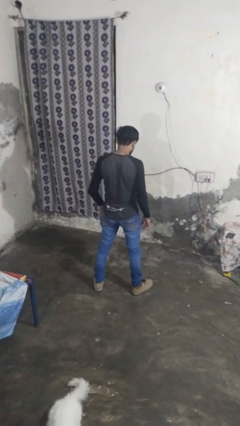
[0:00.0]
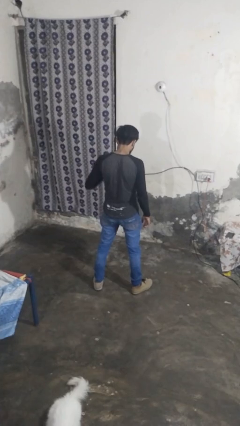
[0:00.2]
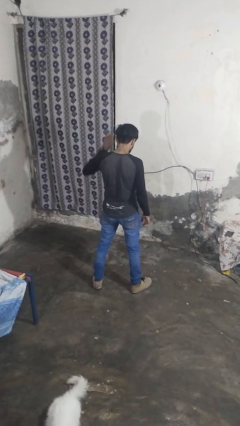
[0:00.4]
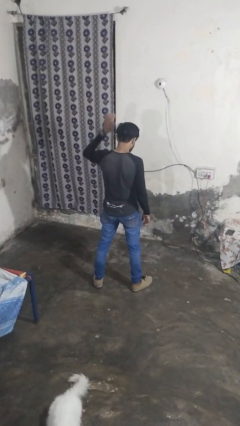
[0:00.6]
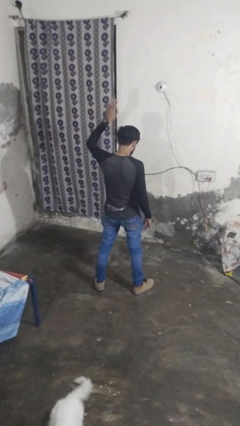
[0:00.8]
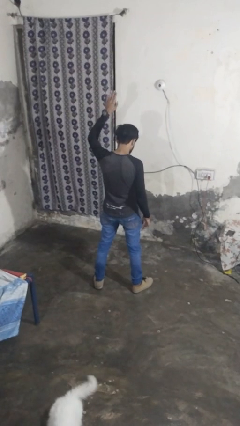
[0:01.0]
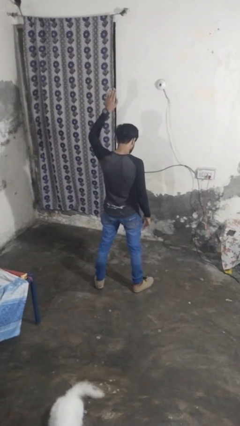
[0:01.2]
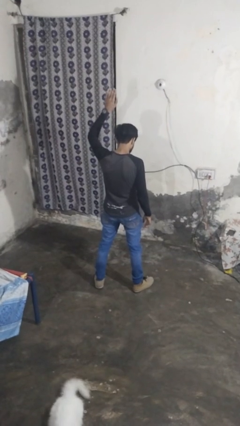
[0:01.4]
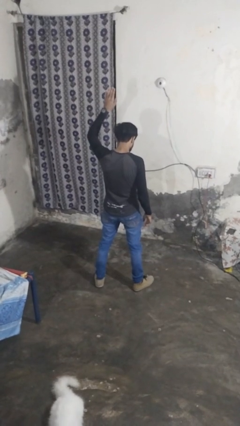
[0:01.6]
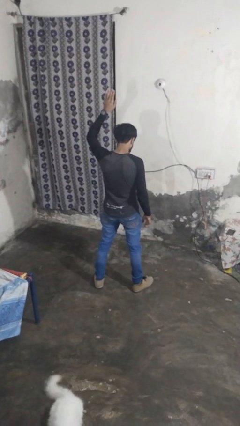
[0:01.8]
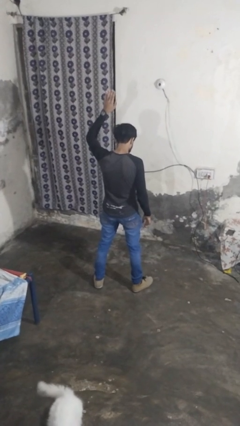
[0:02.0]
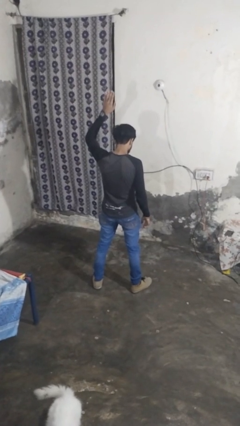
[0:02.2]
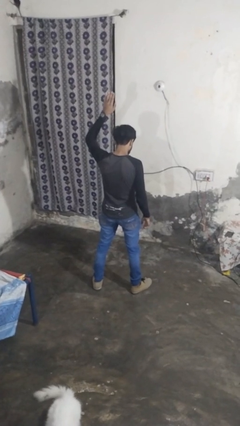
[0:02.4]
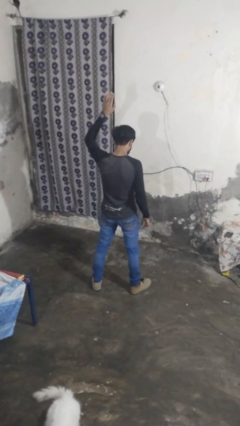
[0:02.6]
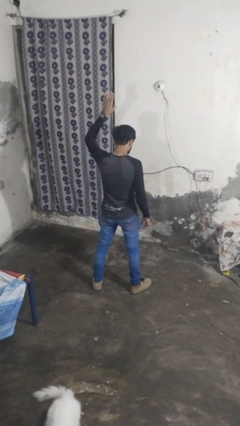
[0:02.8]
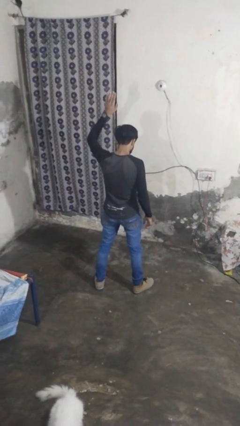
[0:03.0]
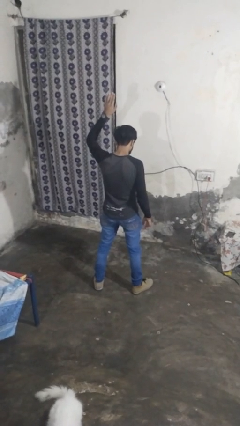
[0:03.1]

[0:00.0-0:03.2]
person gestures raise hand

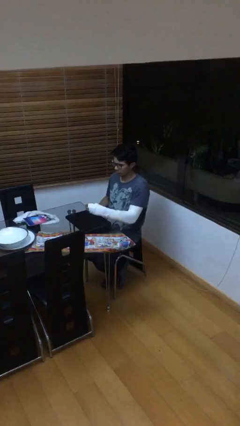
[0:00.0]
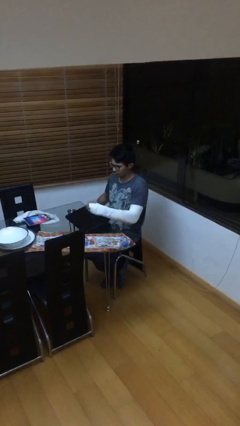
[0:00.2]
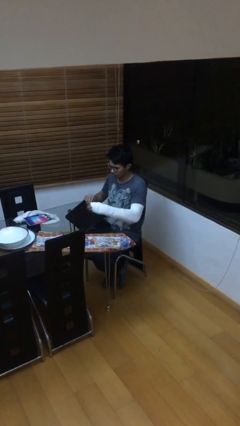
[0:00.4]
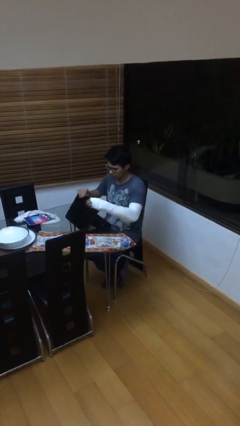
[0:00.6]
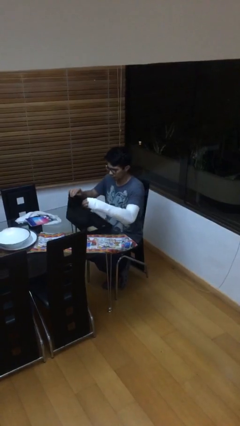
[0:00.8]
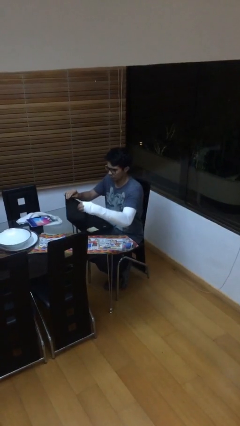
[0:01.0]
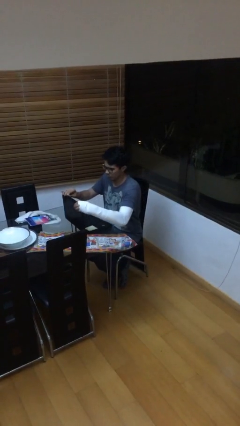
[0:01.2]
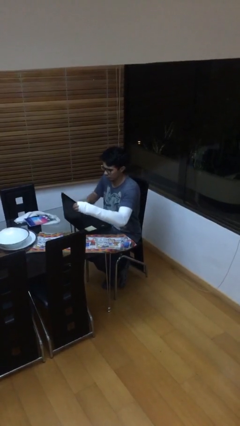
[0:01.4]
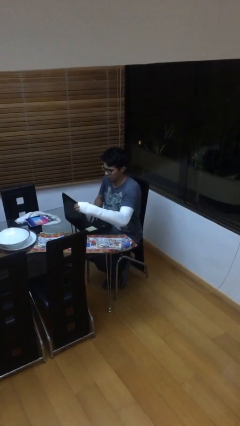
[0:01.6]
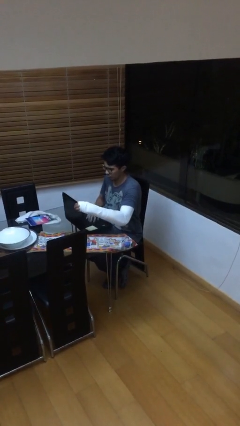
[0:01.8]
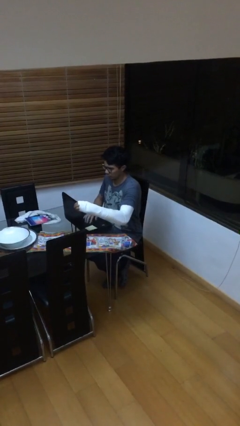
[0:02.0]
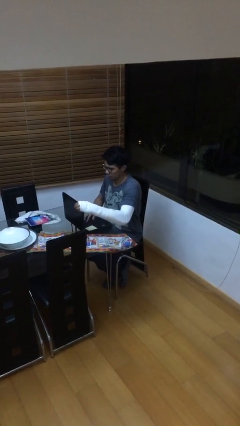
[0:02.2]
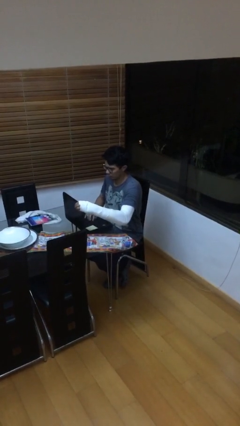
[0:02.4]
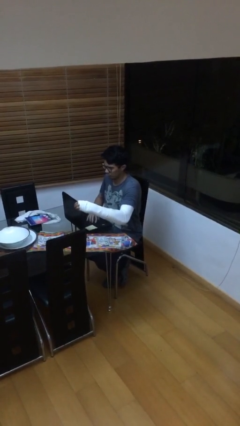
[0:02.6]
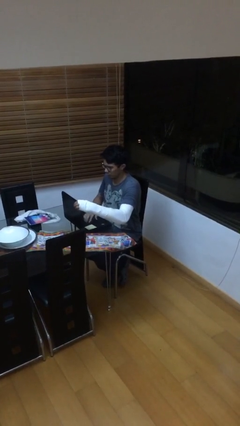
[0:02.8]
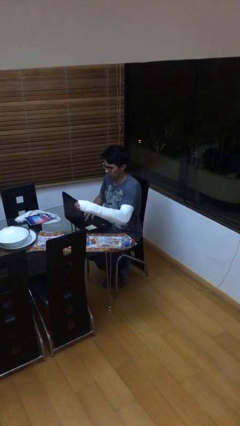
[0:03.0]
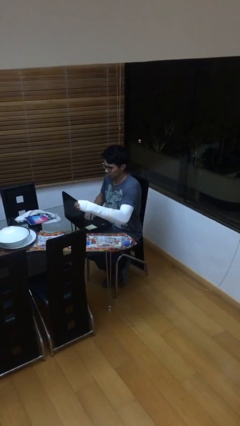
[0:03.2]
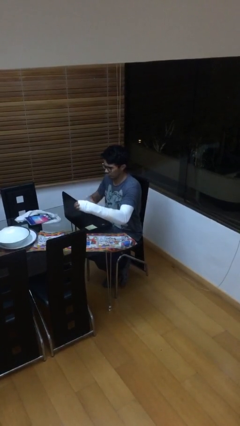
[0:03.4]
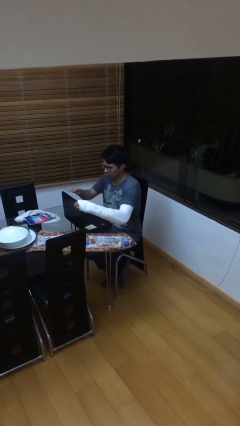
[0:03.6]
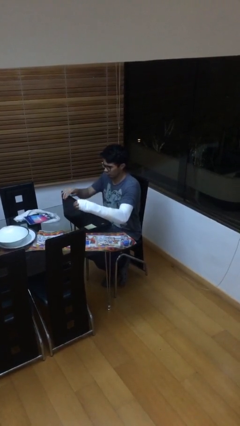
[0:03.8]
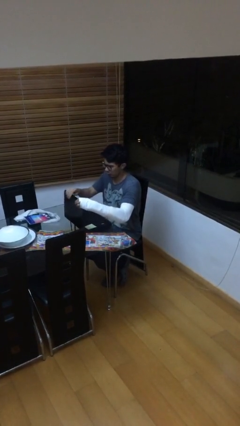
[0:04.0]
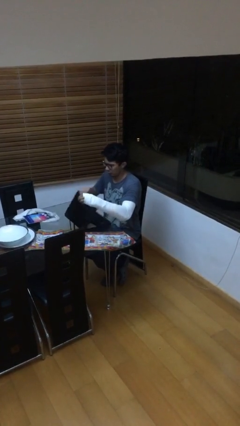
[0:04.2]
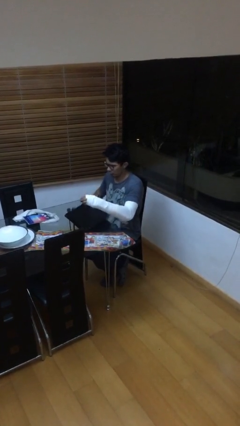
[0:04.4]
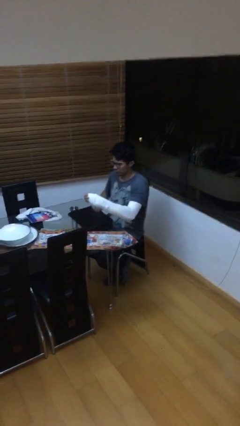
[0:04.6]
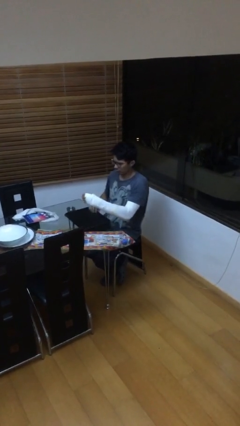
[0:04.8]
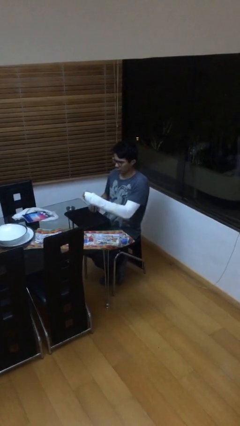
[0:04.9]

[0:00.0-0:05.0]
person interacts with laptop

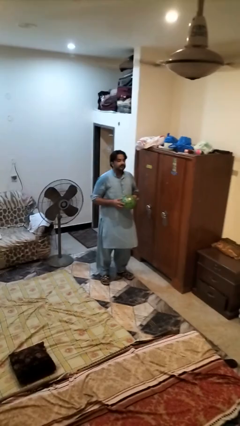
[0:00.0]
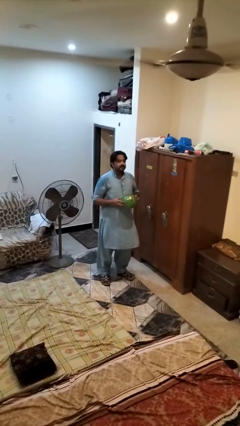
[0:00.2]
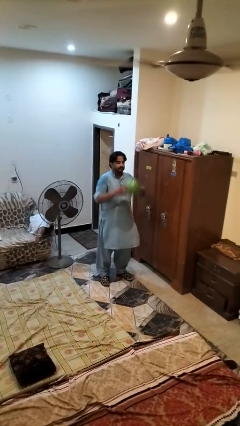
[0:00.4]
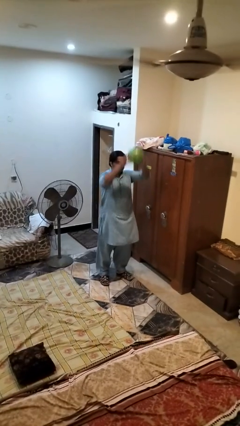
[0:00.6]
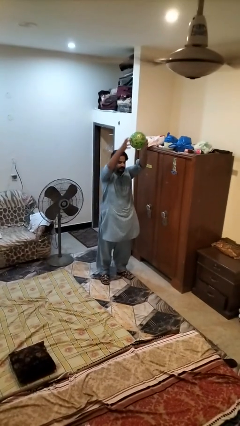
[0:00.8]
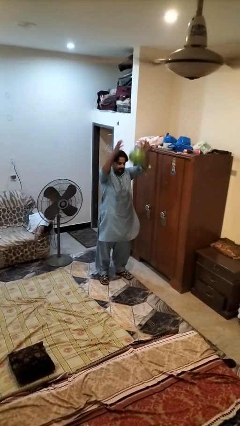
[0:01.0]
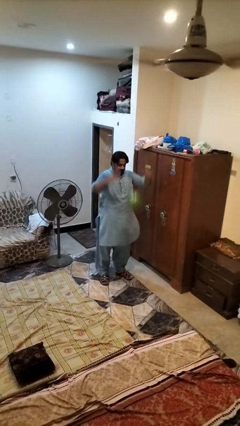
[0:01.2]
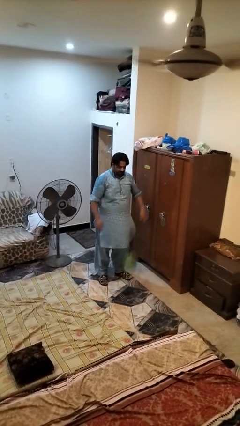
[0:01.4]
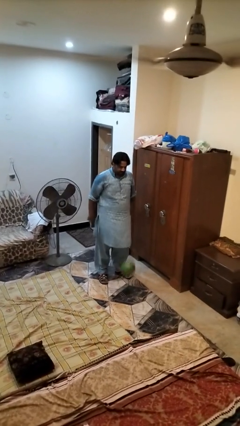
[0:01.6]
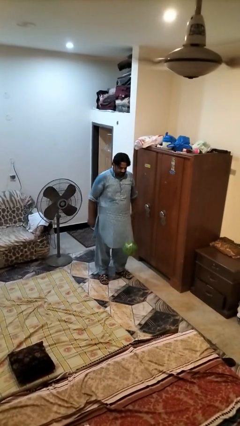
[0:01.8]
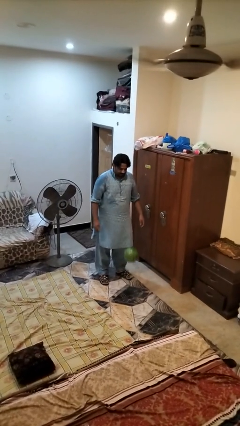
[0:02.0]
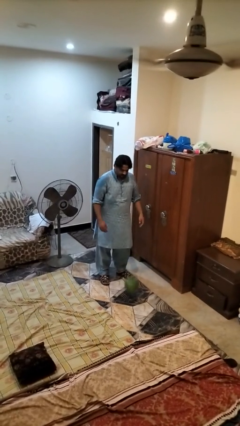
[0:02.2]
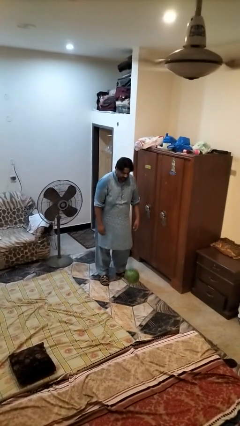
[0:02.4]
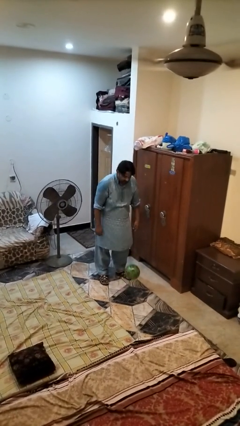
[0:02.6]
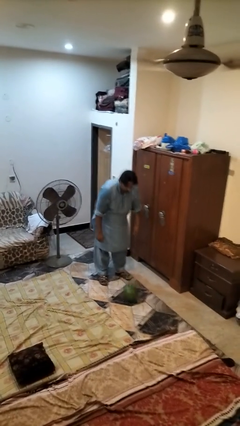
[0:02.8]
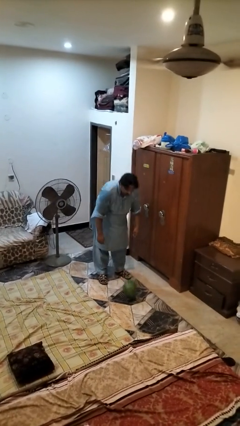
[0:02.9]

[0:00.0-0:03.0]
person drops object

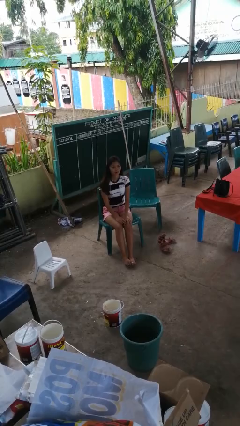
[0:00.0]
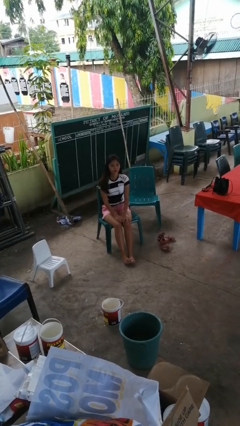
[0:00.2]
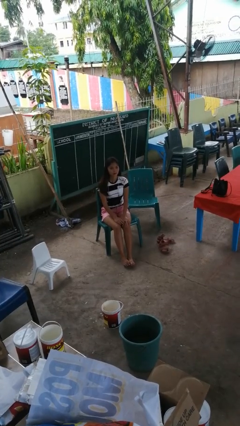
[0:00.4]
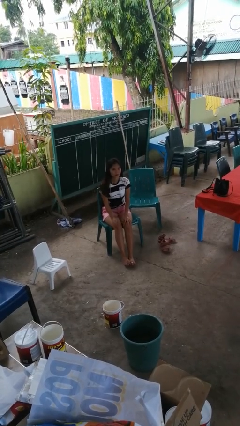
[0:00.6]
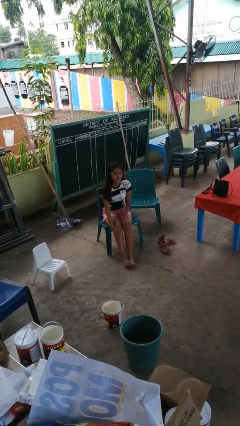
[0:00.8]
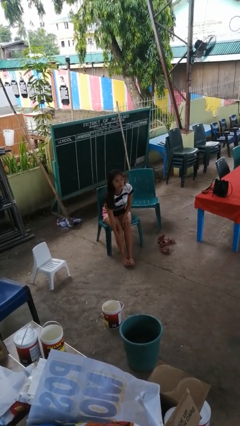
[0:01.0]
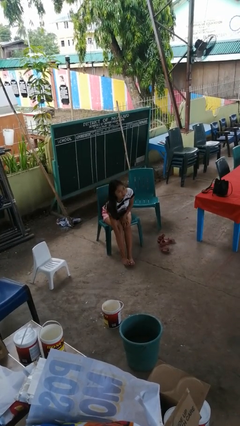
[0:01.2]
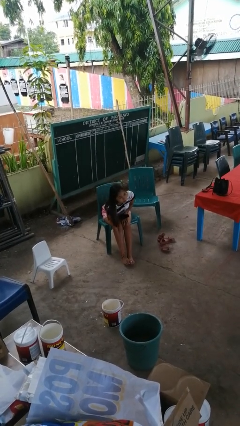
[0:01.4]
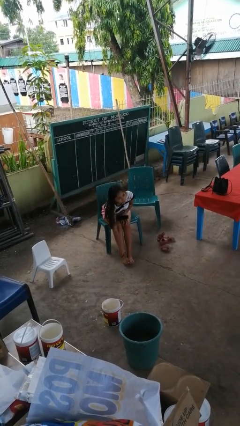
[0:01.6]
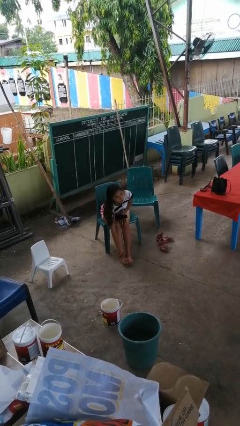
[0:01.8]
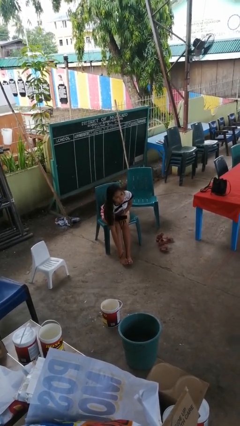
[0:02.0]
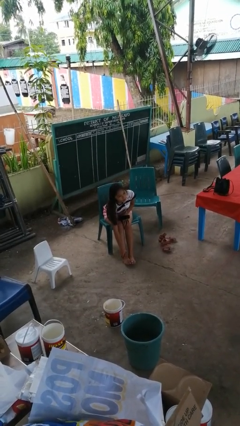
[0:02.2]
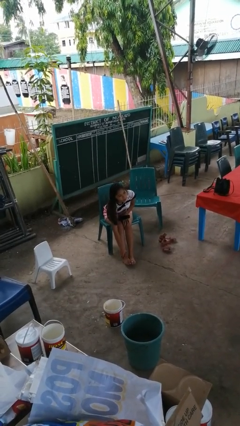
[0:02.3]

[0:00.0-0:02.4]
person rubs foot

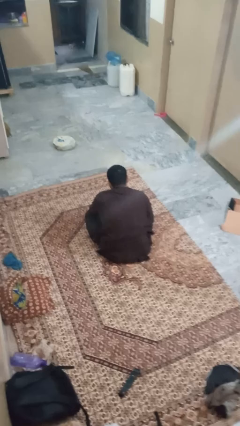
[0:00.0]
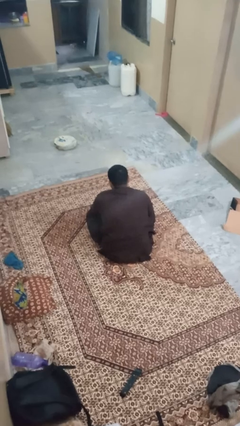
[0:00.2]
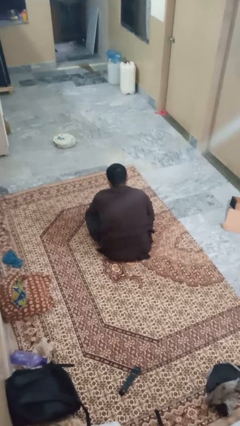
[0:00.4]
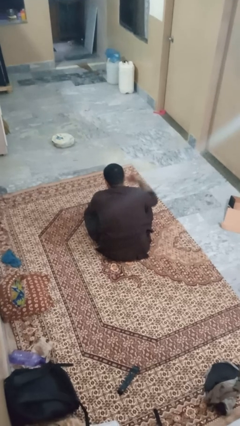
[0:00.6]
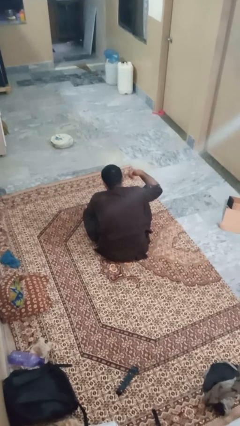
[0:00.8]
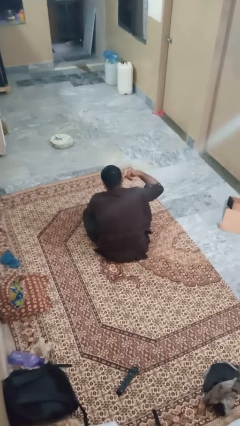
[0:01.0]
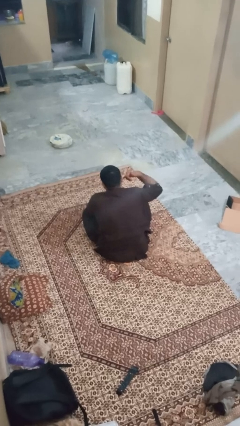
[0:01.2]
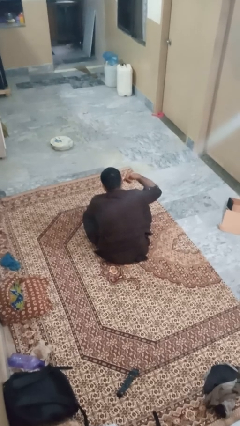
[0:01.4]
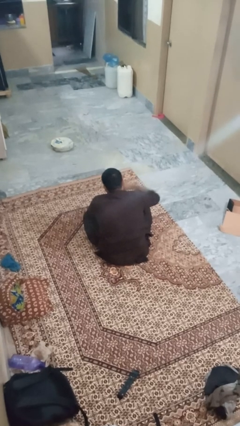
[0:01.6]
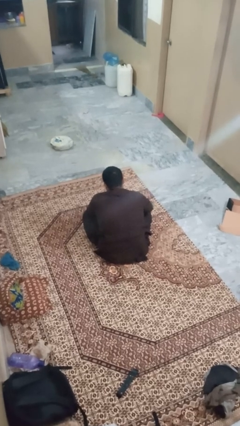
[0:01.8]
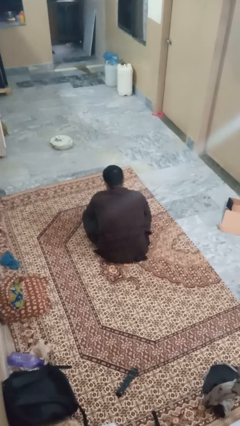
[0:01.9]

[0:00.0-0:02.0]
person gestures call me

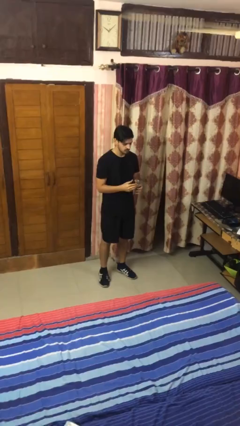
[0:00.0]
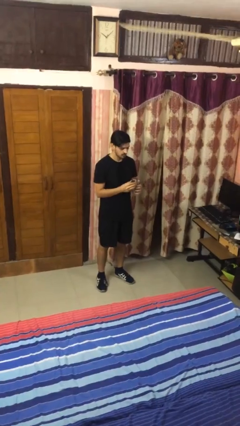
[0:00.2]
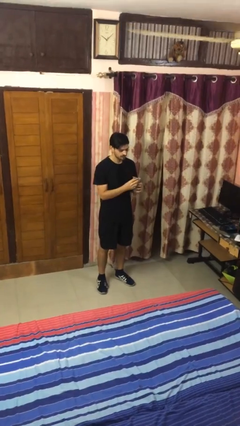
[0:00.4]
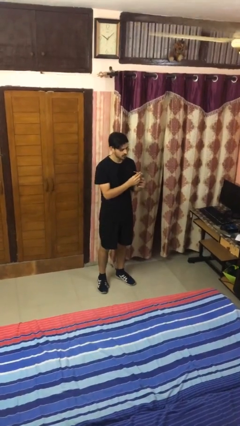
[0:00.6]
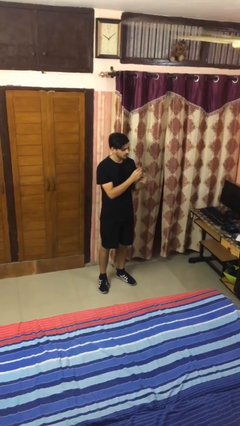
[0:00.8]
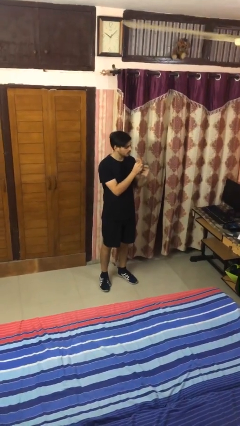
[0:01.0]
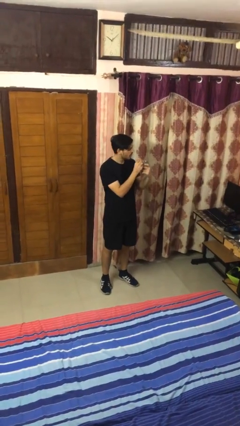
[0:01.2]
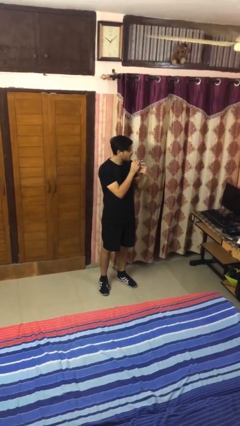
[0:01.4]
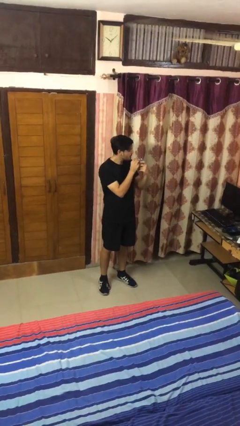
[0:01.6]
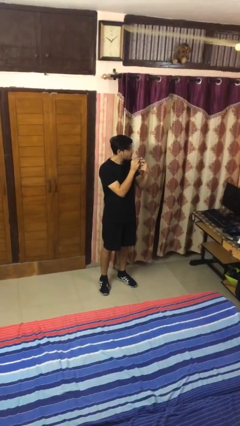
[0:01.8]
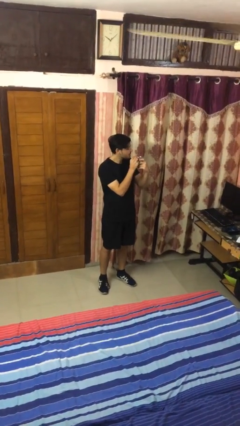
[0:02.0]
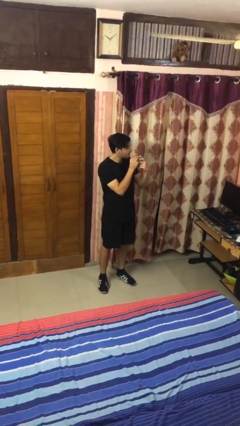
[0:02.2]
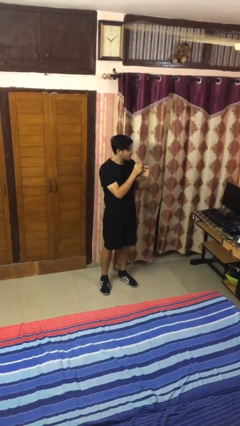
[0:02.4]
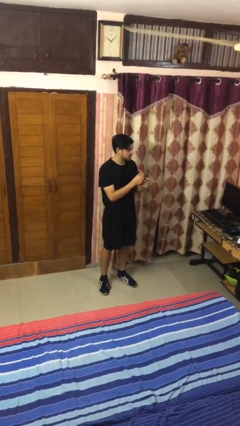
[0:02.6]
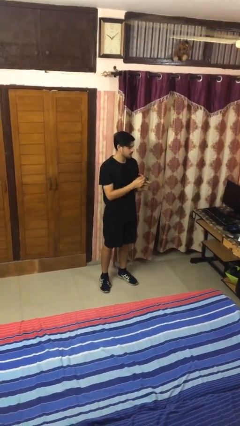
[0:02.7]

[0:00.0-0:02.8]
person drinks from straw
